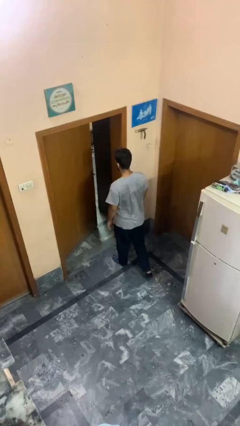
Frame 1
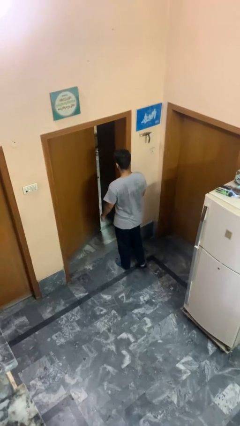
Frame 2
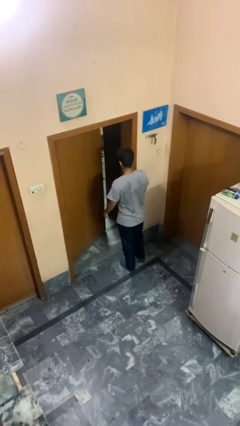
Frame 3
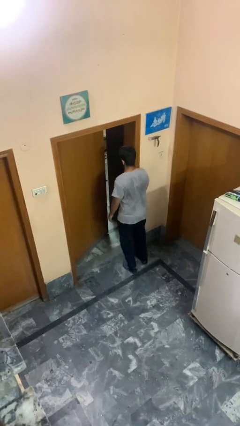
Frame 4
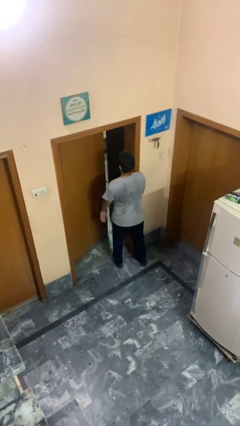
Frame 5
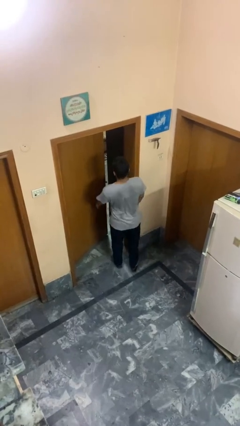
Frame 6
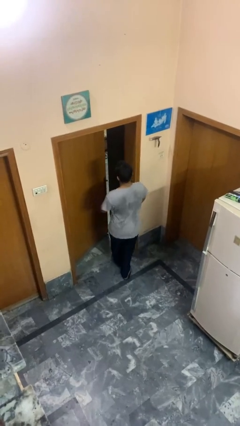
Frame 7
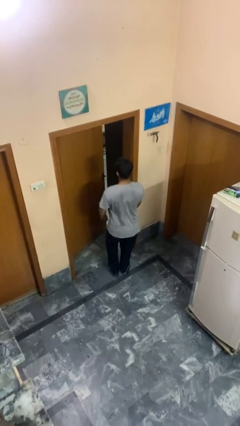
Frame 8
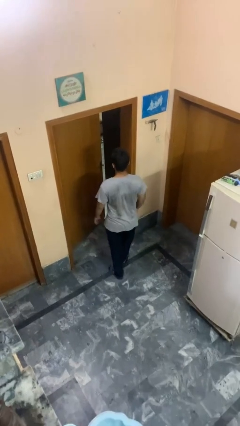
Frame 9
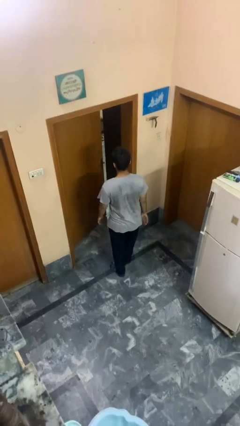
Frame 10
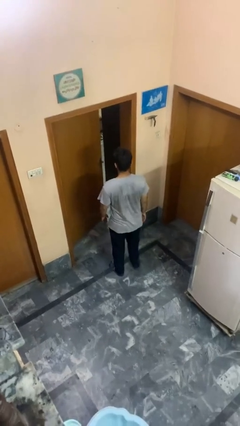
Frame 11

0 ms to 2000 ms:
person bumps into wall

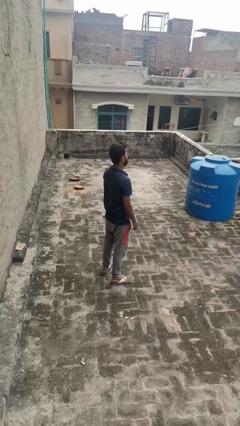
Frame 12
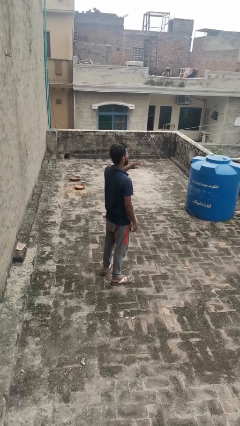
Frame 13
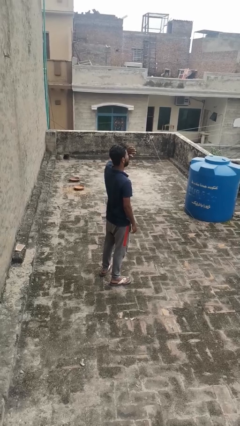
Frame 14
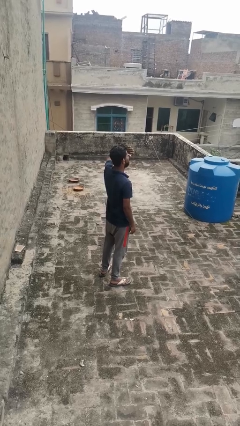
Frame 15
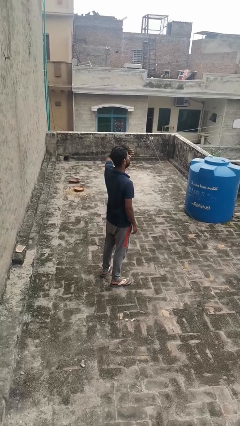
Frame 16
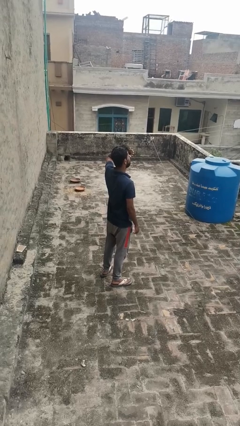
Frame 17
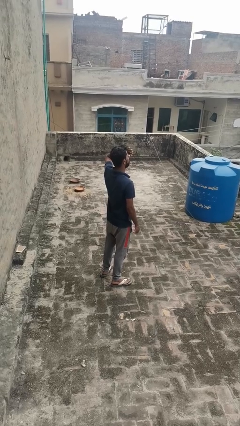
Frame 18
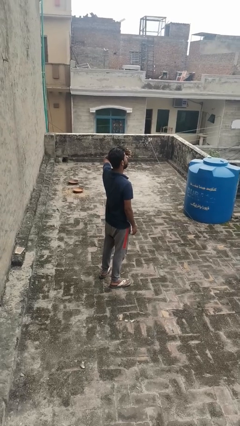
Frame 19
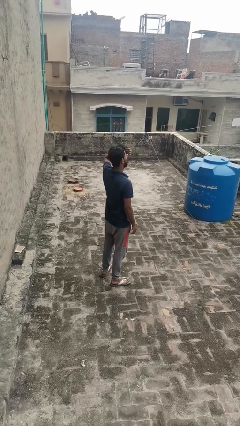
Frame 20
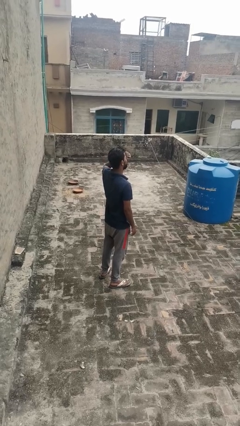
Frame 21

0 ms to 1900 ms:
person shades eyes

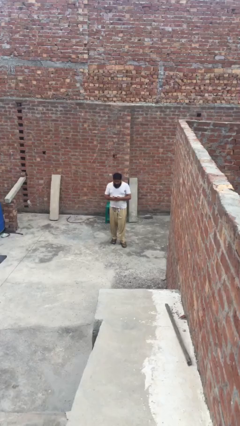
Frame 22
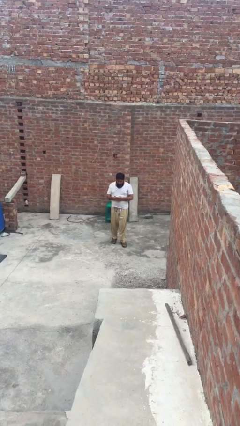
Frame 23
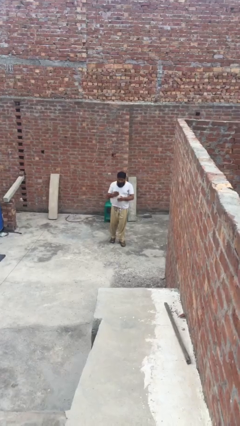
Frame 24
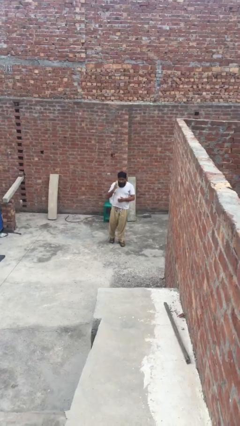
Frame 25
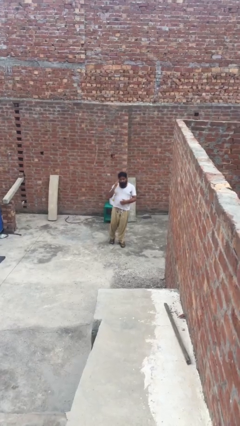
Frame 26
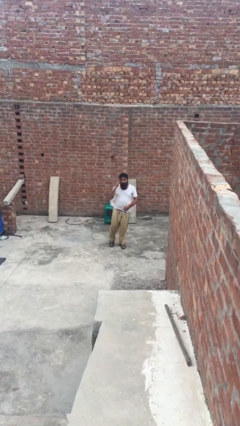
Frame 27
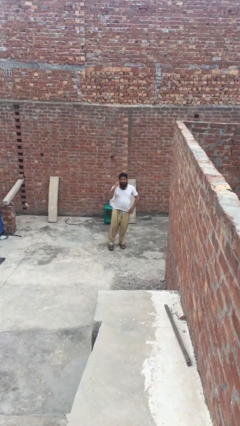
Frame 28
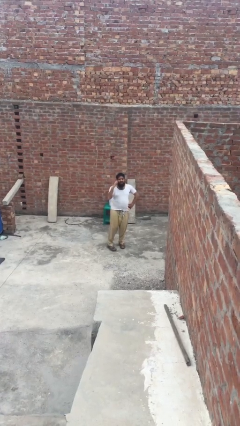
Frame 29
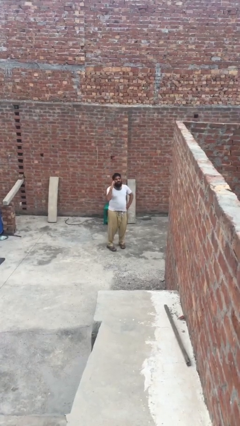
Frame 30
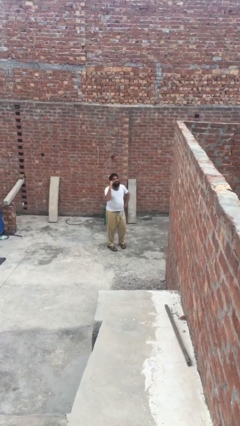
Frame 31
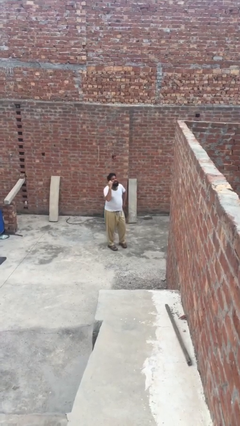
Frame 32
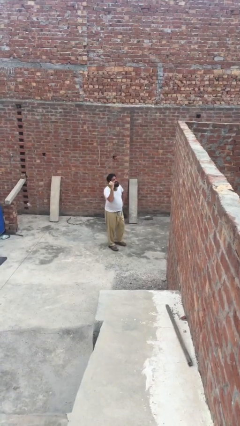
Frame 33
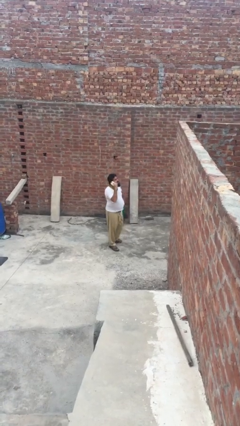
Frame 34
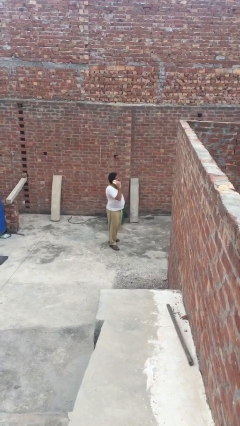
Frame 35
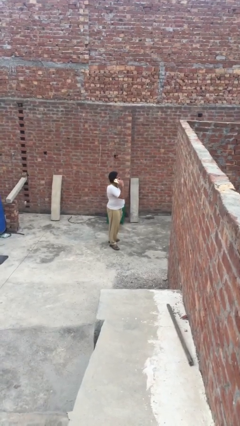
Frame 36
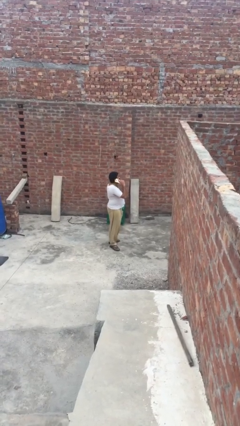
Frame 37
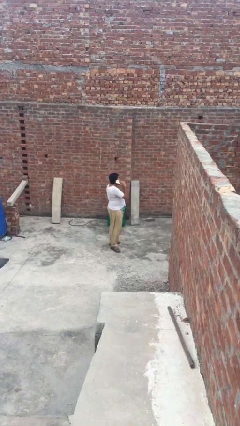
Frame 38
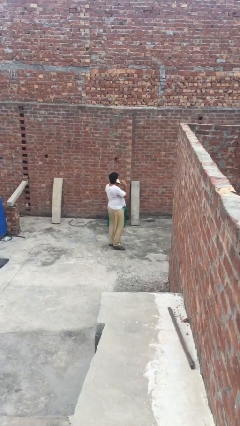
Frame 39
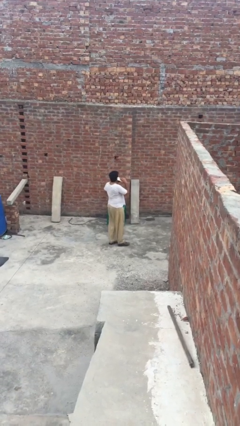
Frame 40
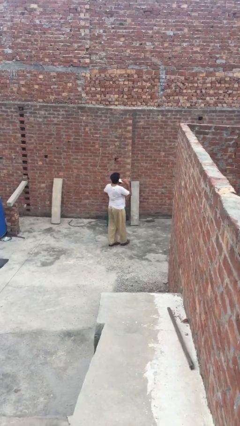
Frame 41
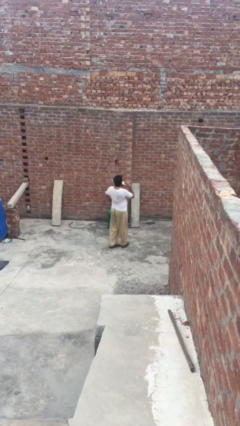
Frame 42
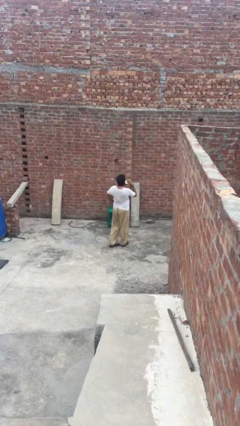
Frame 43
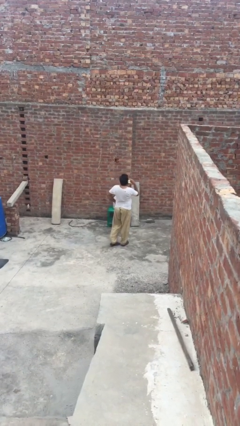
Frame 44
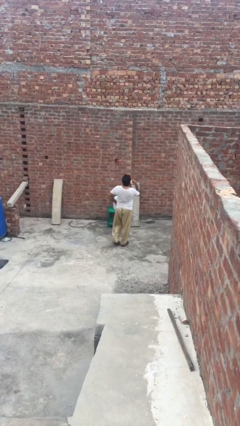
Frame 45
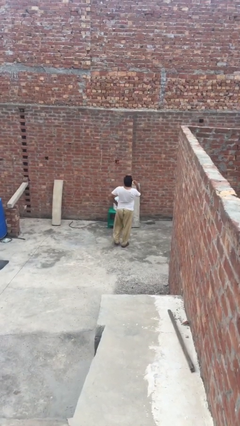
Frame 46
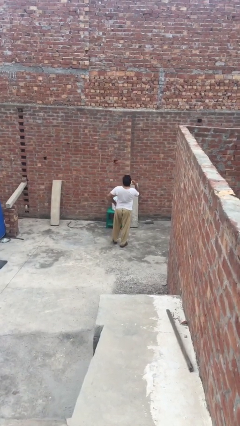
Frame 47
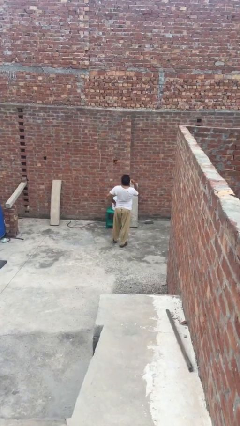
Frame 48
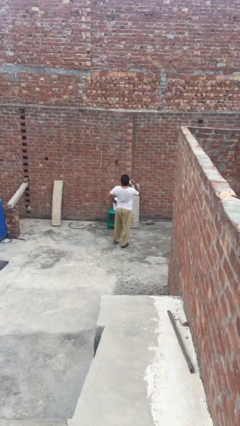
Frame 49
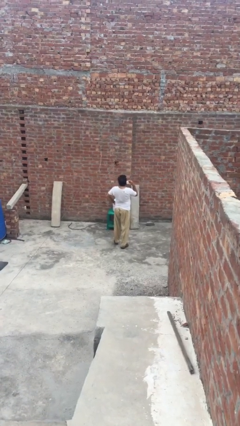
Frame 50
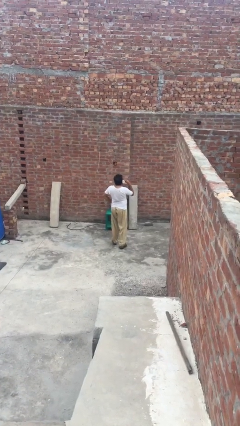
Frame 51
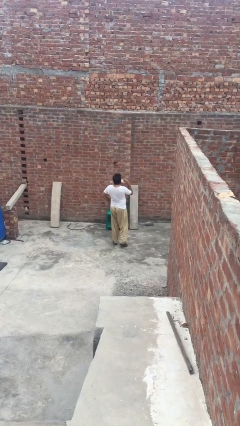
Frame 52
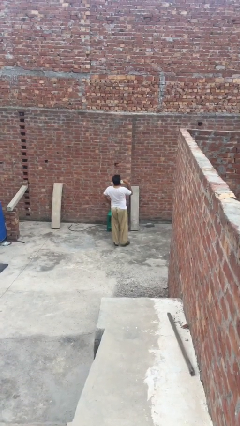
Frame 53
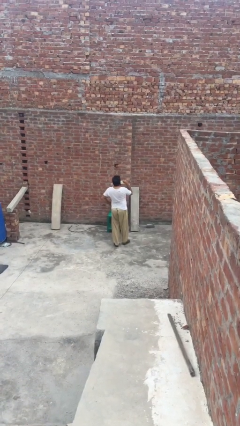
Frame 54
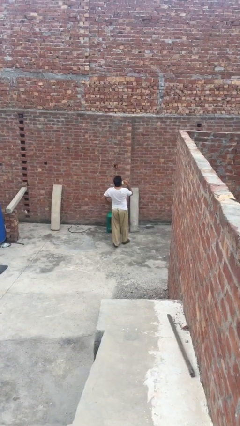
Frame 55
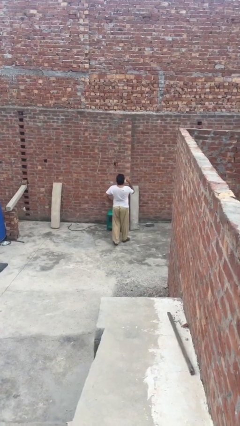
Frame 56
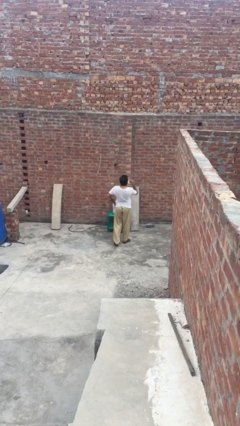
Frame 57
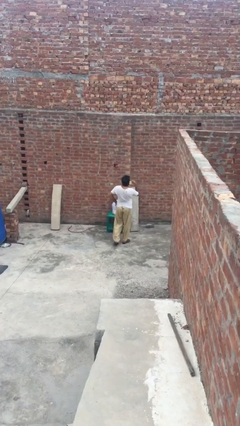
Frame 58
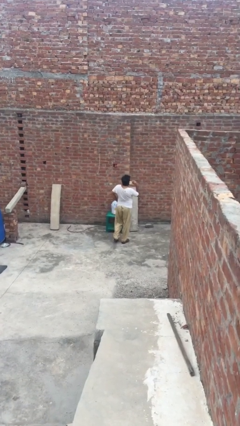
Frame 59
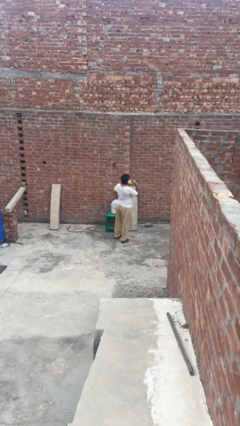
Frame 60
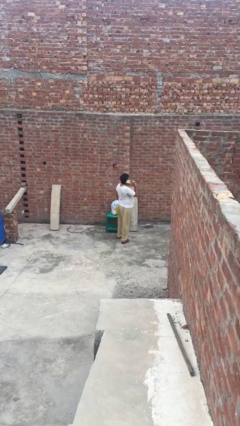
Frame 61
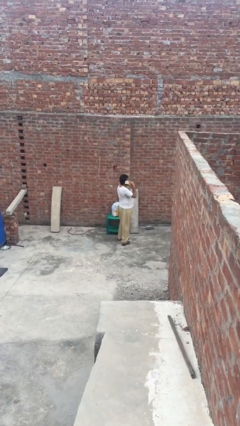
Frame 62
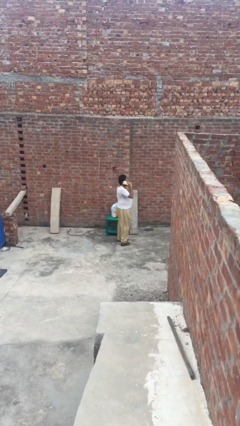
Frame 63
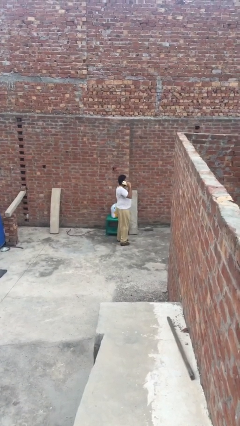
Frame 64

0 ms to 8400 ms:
person talks on phone

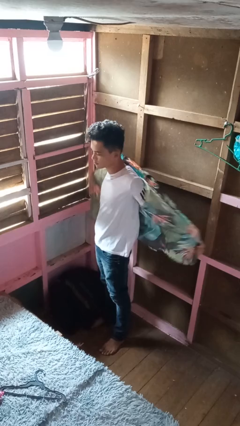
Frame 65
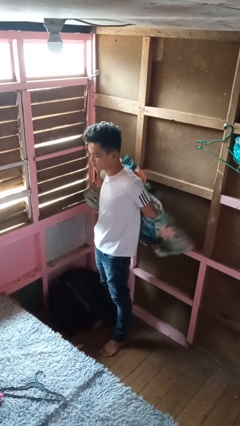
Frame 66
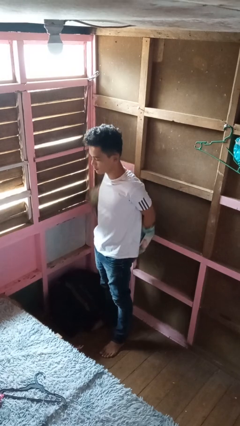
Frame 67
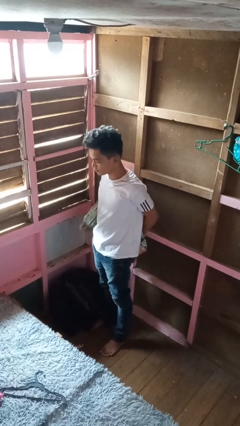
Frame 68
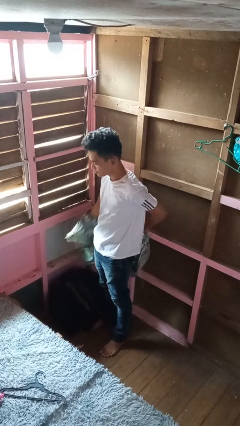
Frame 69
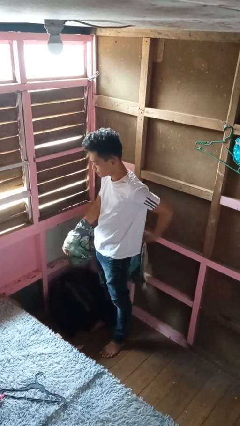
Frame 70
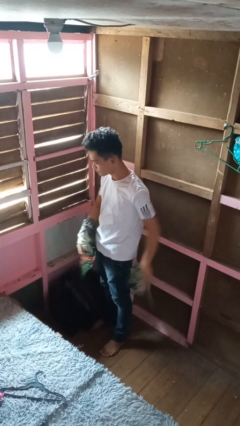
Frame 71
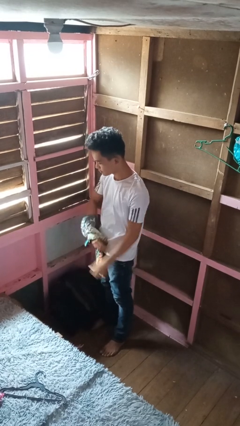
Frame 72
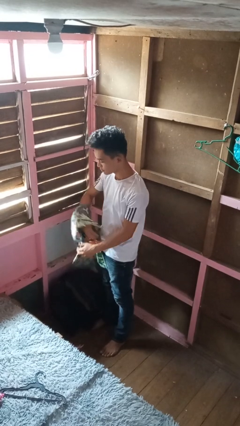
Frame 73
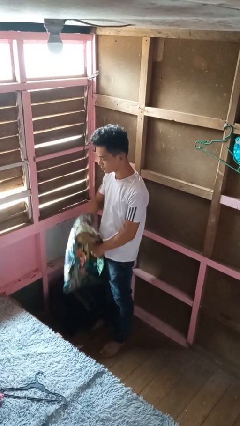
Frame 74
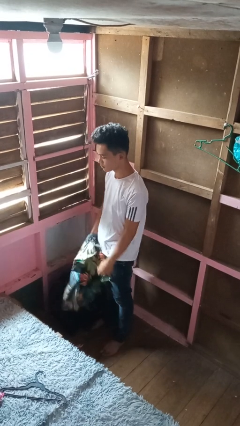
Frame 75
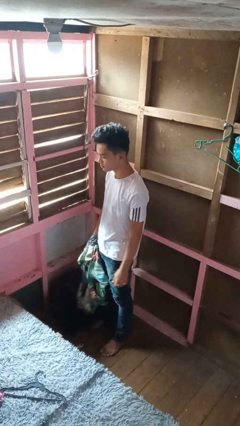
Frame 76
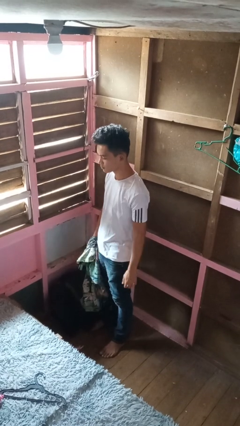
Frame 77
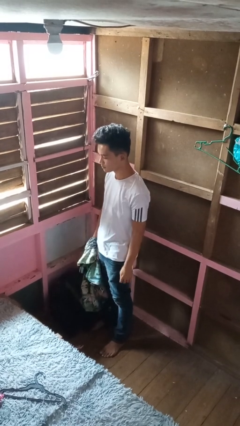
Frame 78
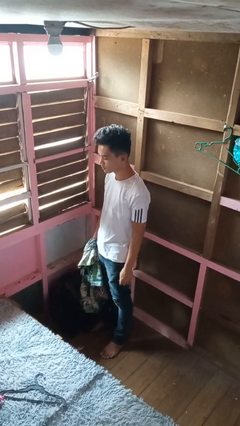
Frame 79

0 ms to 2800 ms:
person takes off shirt

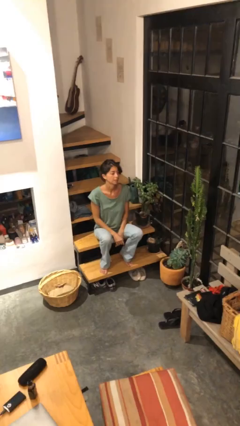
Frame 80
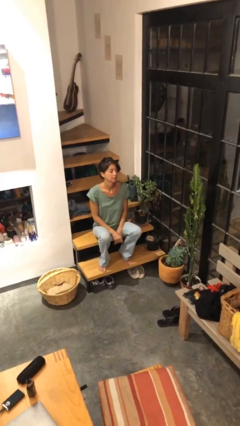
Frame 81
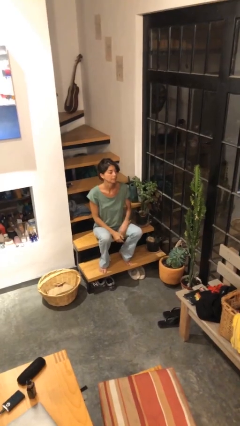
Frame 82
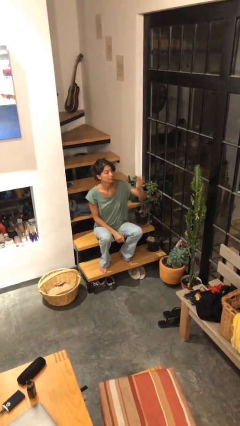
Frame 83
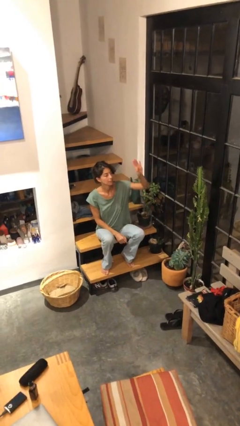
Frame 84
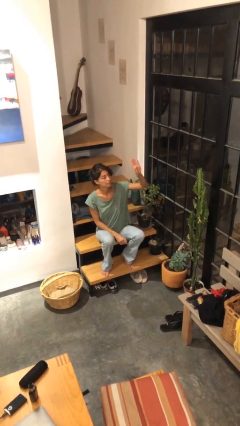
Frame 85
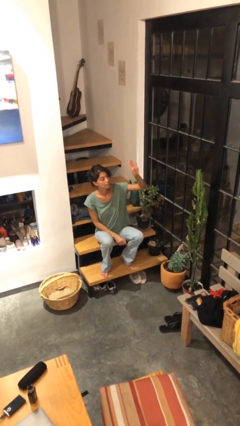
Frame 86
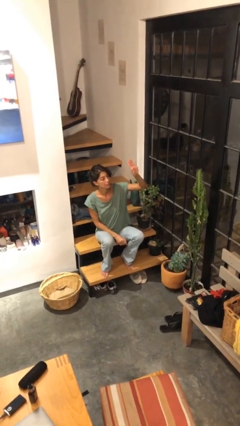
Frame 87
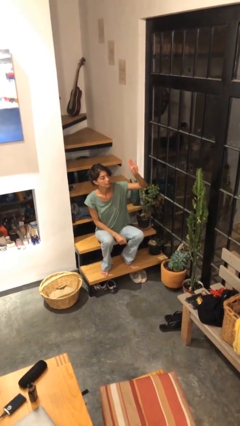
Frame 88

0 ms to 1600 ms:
person gestures raise hand

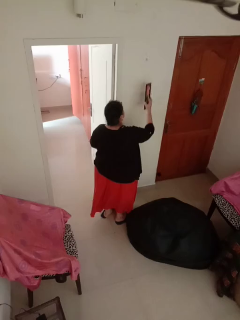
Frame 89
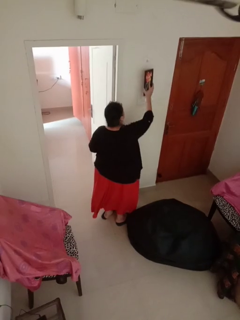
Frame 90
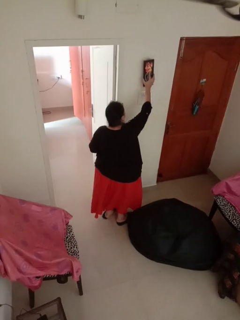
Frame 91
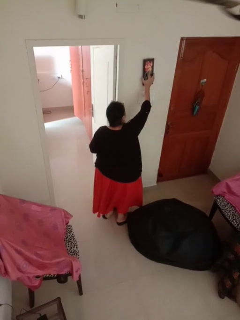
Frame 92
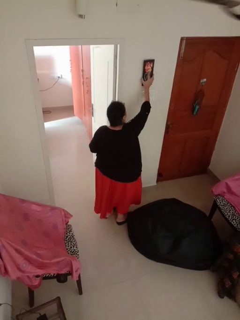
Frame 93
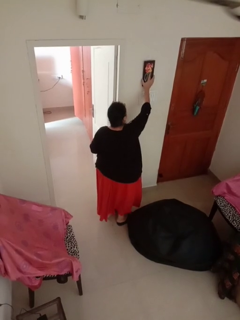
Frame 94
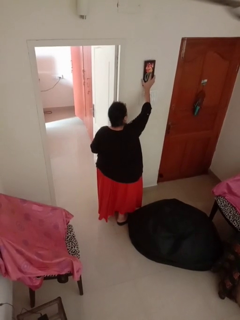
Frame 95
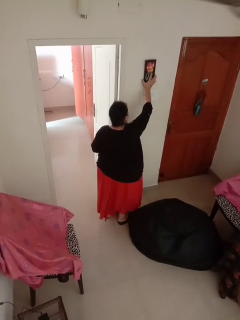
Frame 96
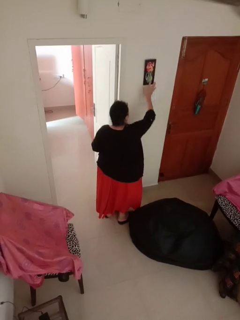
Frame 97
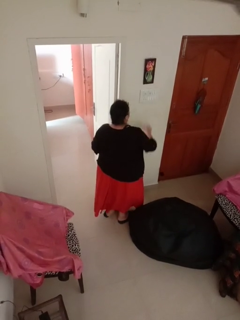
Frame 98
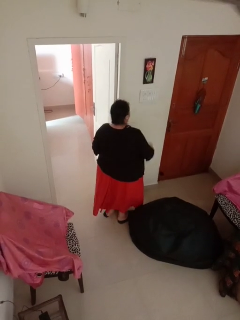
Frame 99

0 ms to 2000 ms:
person puts up picture frame
